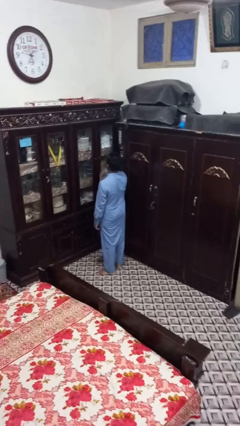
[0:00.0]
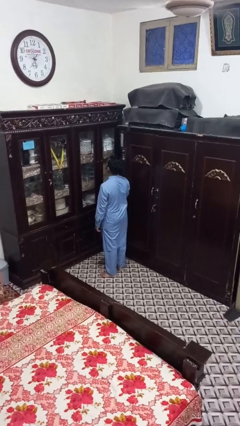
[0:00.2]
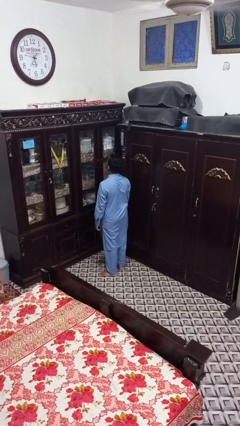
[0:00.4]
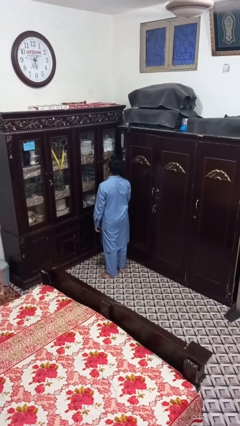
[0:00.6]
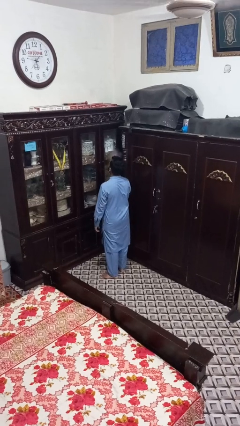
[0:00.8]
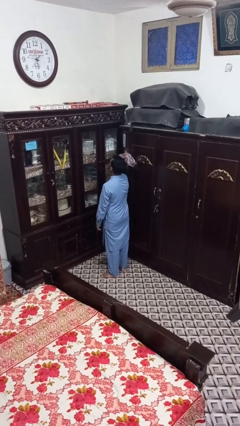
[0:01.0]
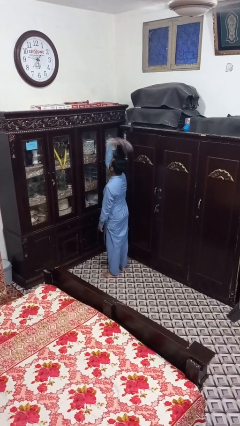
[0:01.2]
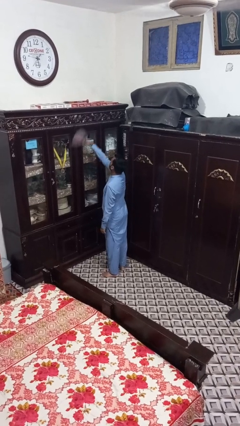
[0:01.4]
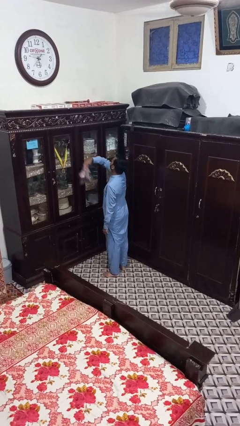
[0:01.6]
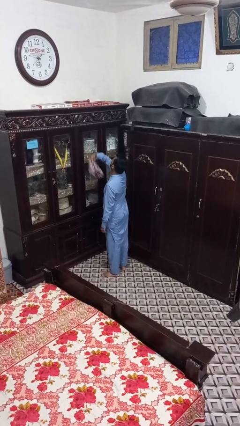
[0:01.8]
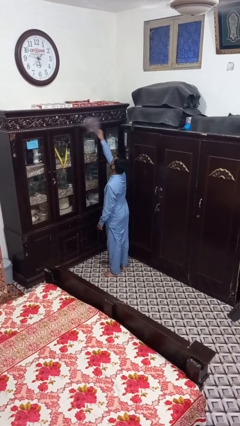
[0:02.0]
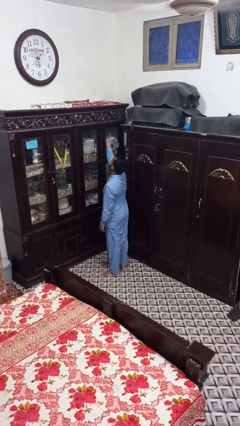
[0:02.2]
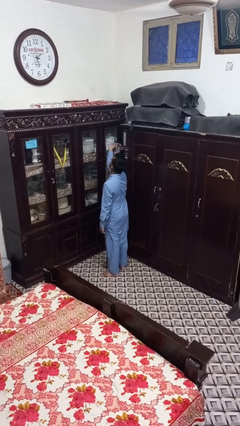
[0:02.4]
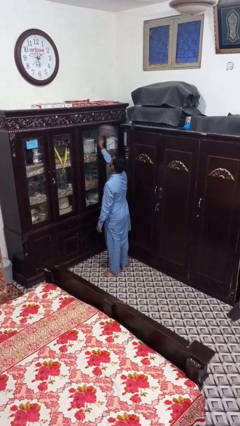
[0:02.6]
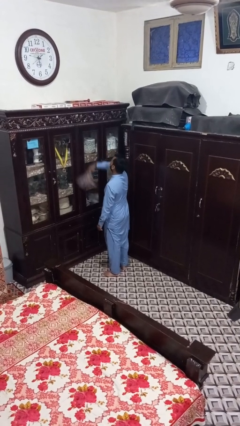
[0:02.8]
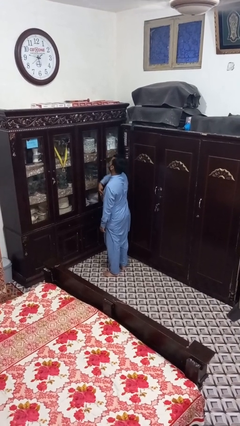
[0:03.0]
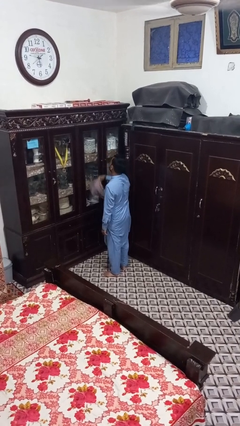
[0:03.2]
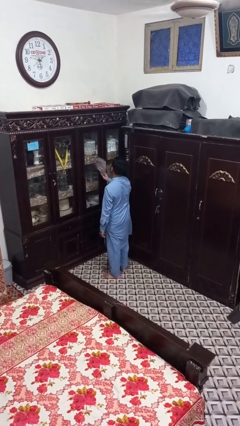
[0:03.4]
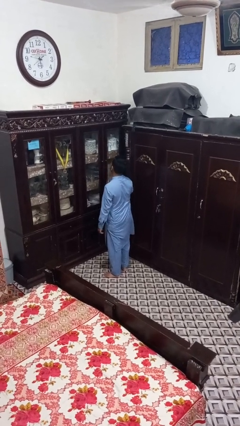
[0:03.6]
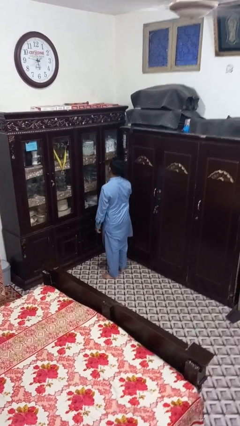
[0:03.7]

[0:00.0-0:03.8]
person dusts furniture

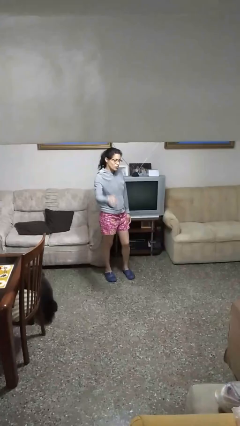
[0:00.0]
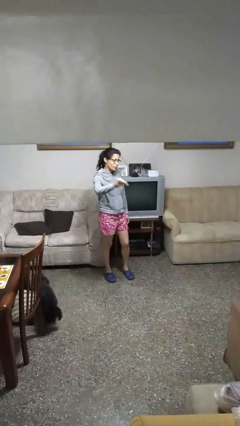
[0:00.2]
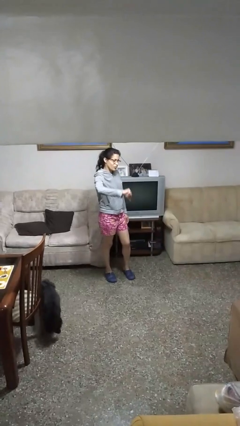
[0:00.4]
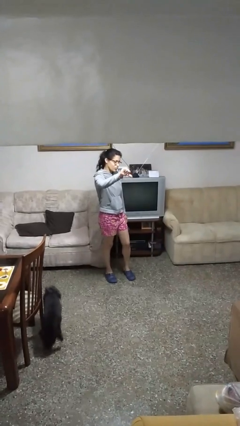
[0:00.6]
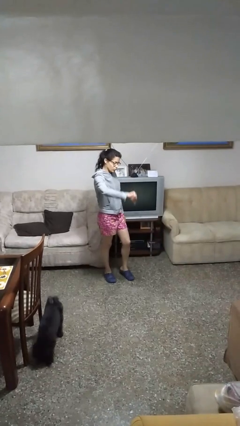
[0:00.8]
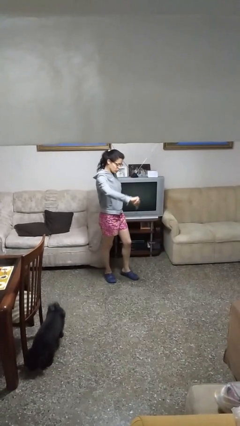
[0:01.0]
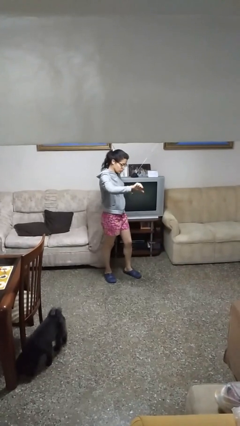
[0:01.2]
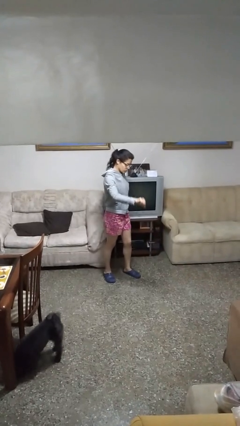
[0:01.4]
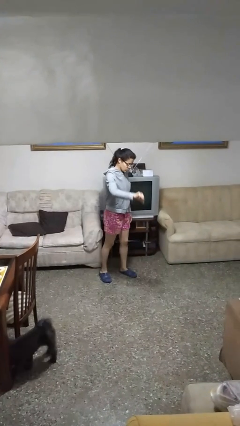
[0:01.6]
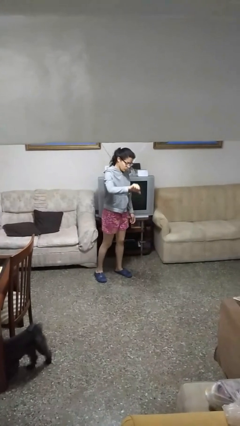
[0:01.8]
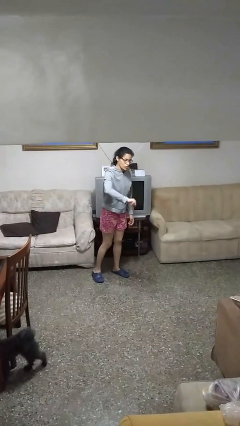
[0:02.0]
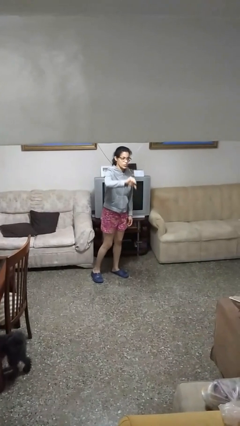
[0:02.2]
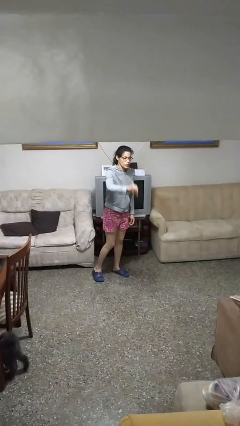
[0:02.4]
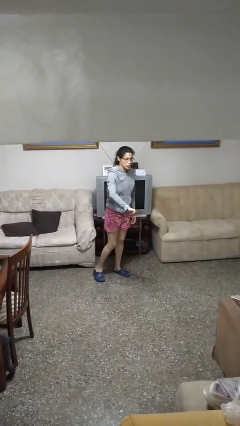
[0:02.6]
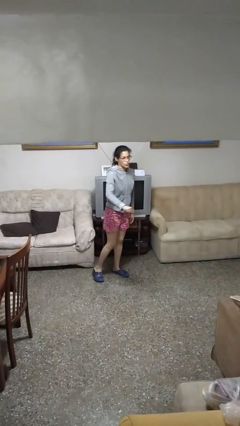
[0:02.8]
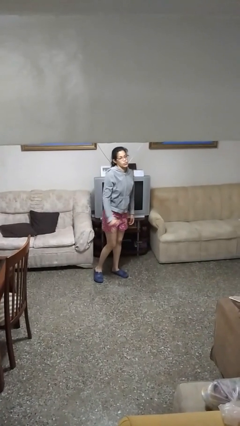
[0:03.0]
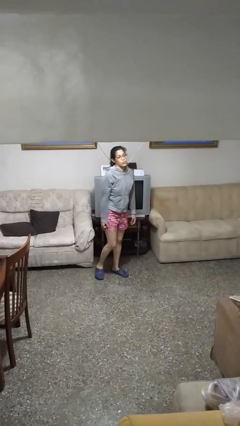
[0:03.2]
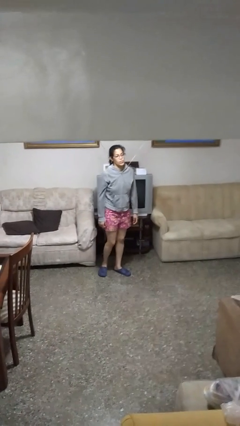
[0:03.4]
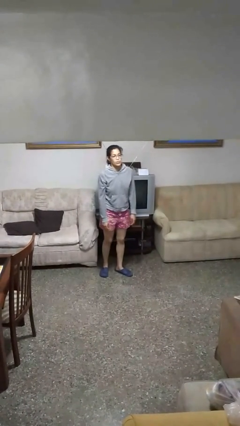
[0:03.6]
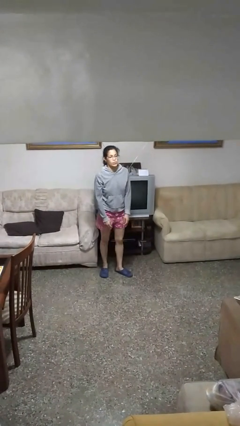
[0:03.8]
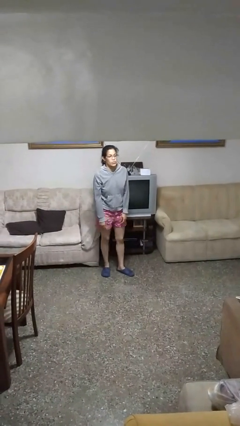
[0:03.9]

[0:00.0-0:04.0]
person gestures thumbs down

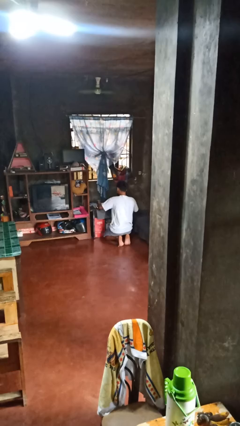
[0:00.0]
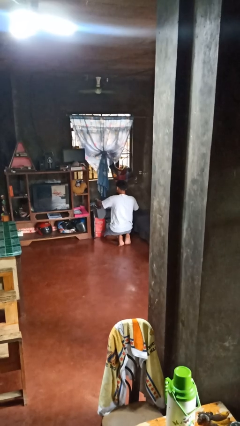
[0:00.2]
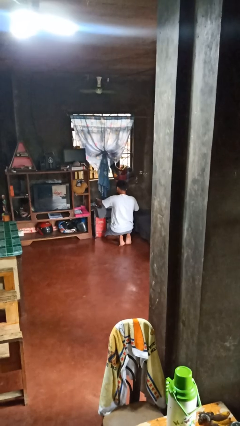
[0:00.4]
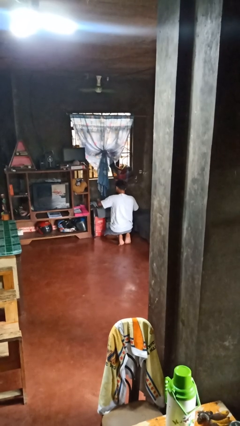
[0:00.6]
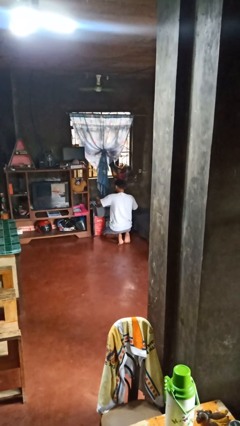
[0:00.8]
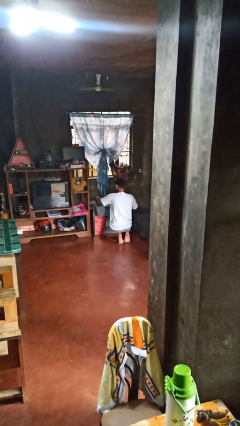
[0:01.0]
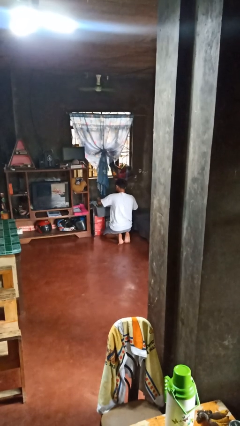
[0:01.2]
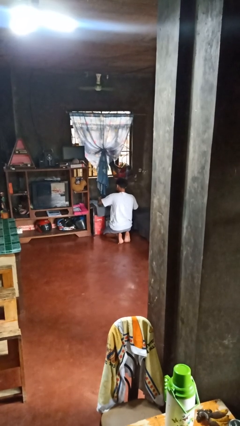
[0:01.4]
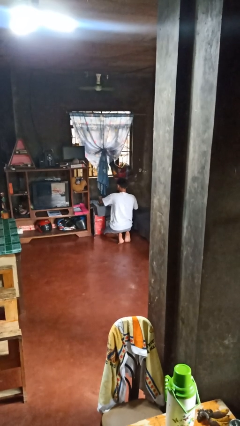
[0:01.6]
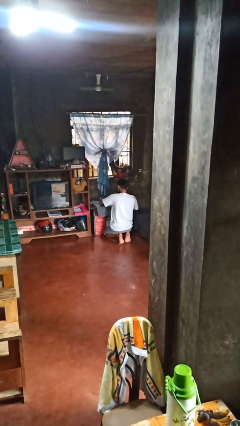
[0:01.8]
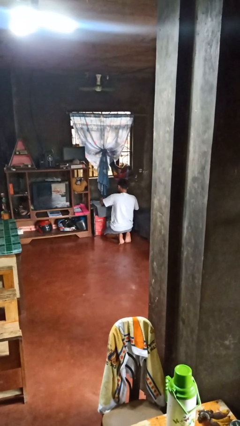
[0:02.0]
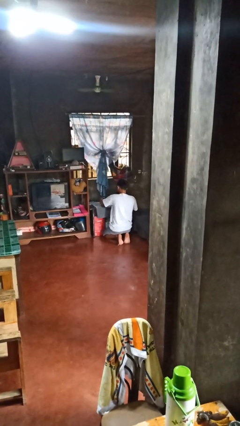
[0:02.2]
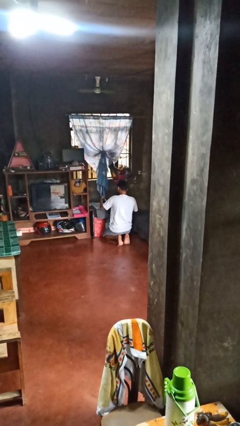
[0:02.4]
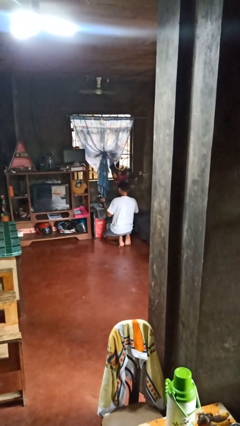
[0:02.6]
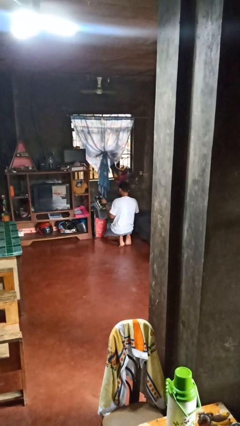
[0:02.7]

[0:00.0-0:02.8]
person irons clothes

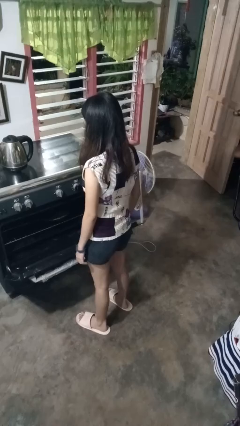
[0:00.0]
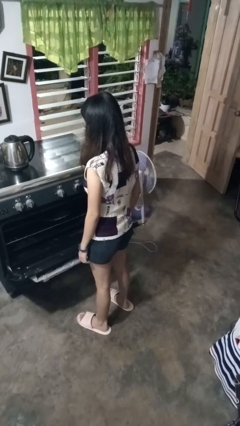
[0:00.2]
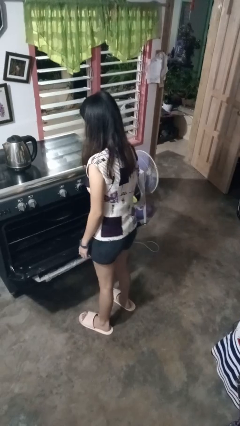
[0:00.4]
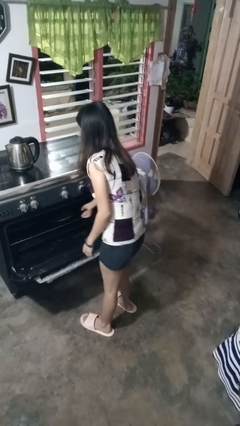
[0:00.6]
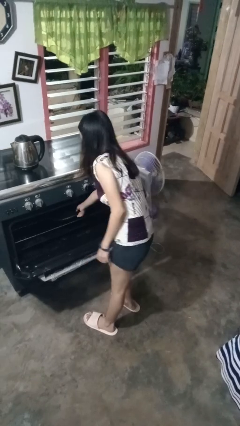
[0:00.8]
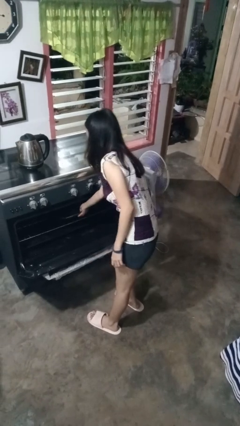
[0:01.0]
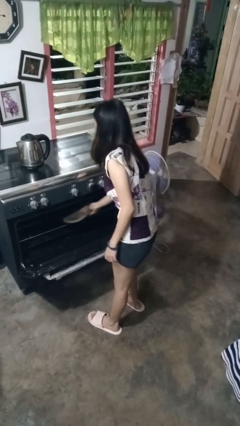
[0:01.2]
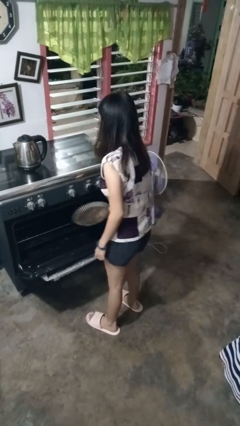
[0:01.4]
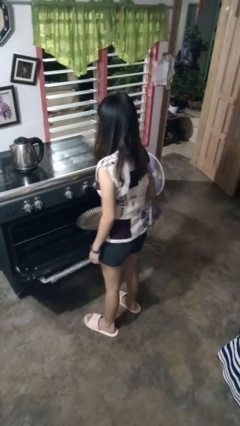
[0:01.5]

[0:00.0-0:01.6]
person takes object from oven

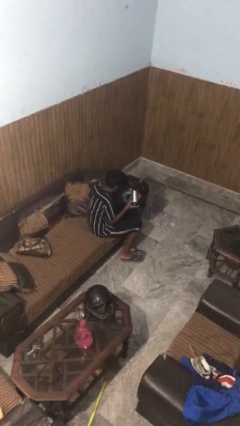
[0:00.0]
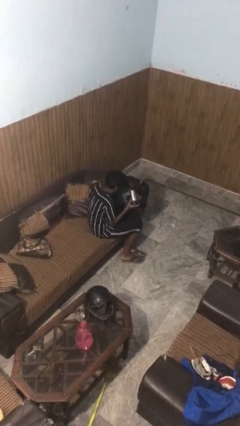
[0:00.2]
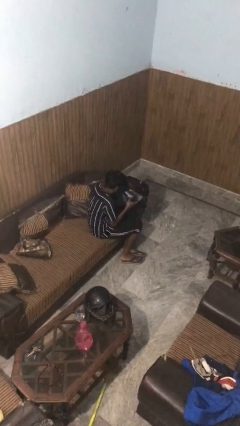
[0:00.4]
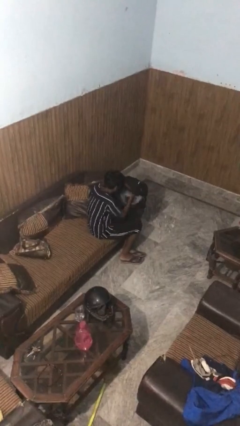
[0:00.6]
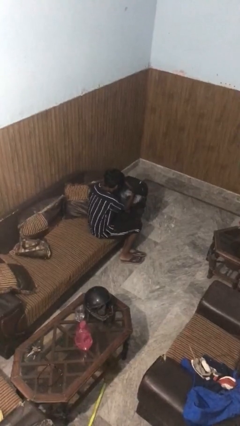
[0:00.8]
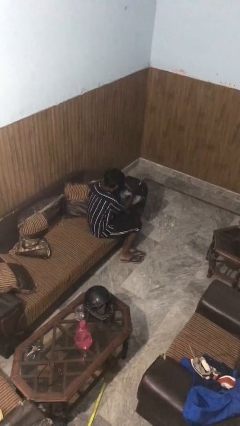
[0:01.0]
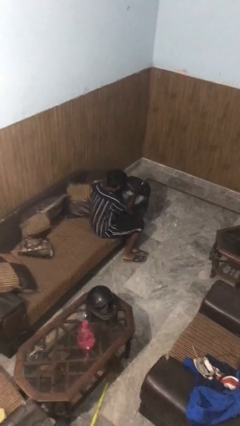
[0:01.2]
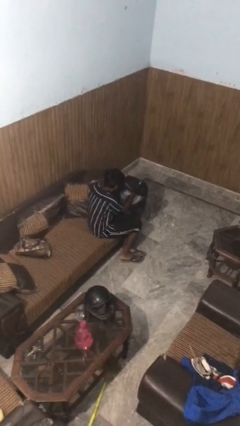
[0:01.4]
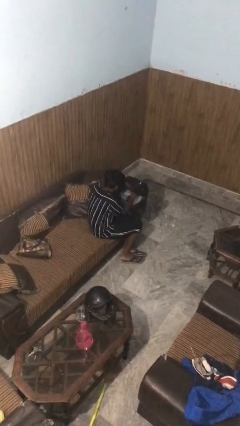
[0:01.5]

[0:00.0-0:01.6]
person puts object into backpack

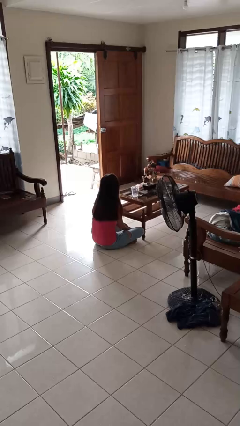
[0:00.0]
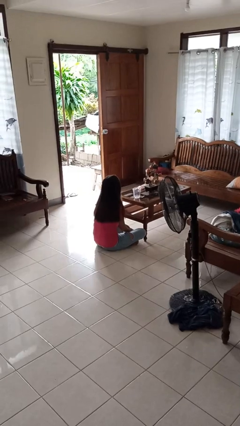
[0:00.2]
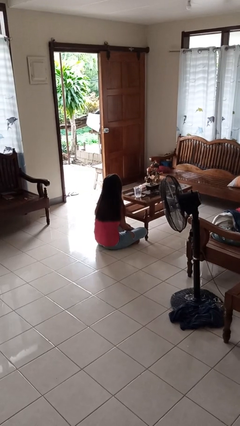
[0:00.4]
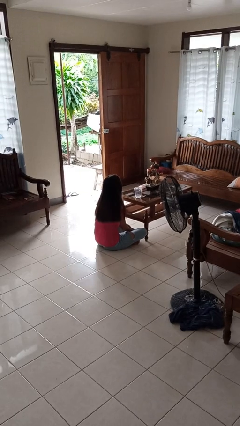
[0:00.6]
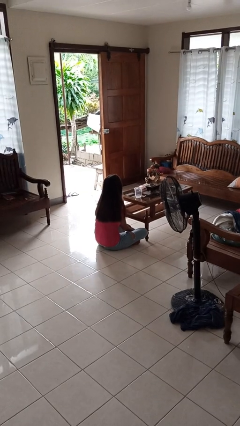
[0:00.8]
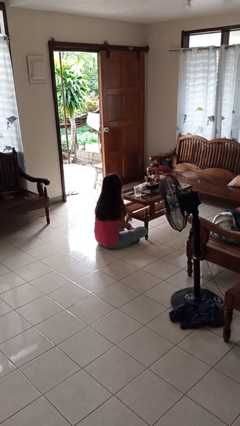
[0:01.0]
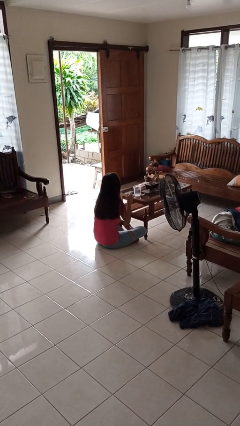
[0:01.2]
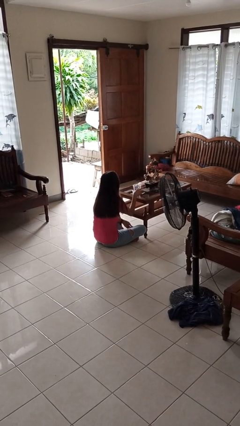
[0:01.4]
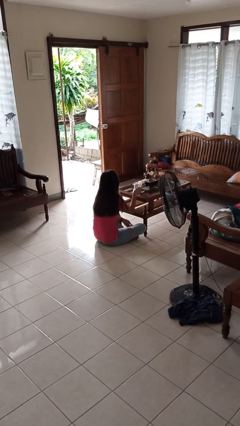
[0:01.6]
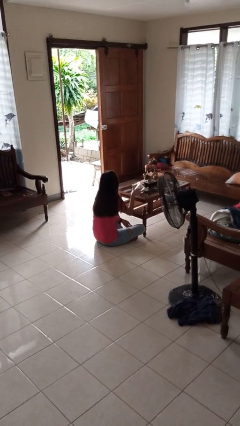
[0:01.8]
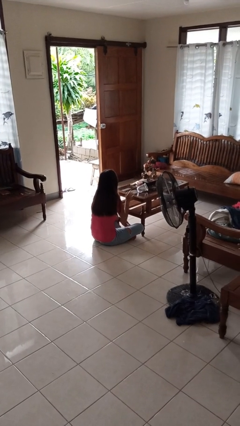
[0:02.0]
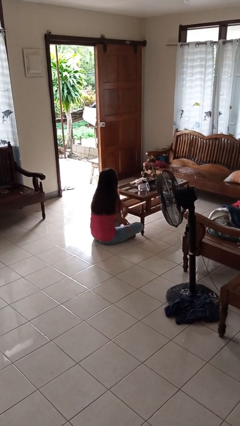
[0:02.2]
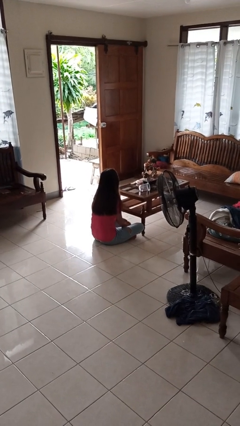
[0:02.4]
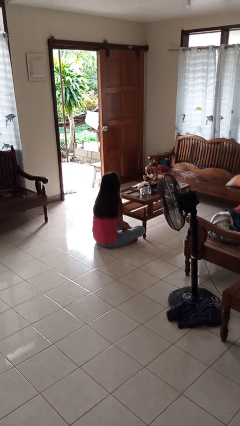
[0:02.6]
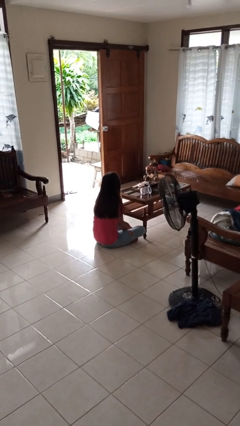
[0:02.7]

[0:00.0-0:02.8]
person knocks over glass

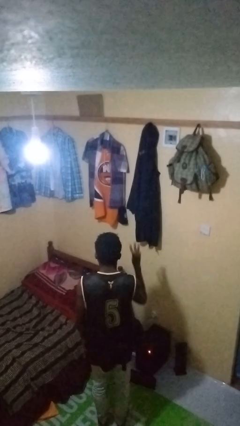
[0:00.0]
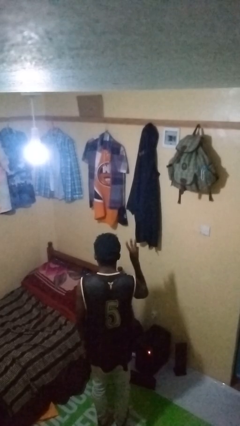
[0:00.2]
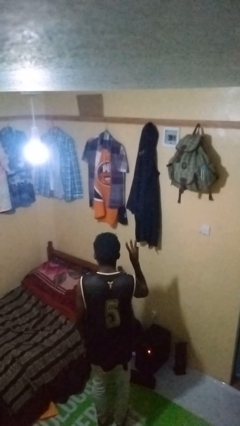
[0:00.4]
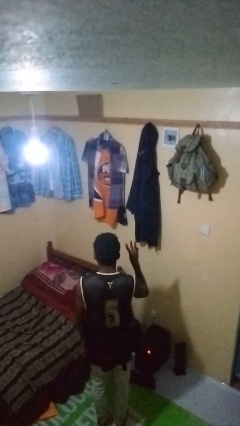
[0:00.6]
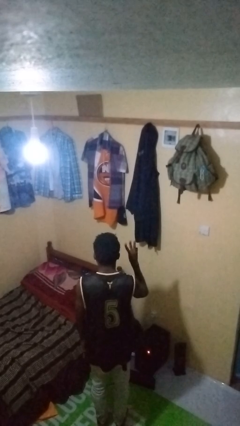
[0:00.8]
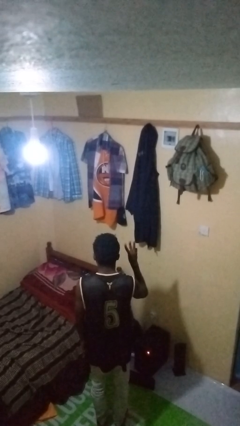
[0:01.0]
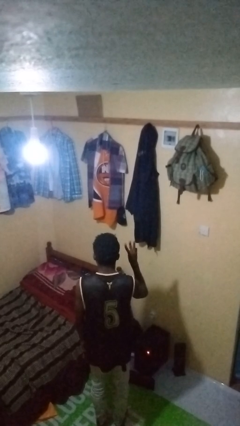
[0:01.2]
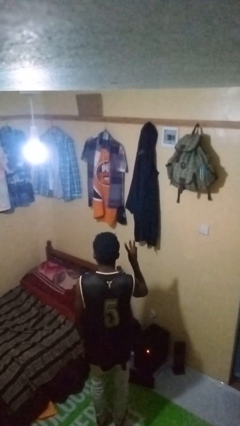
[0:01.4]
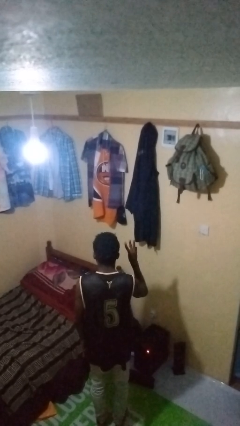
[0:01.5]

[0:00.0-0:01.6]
person gestures number three
